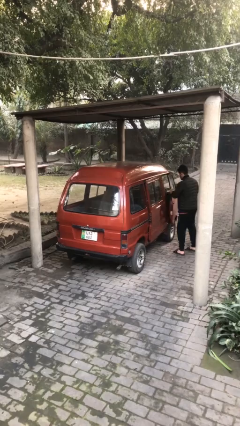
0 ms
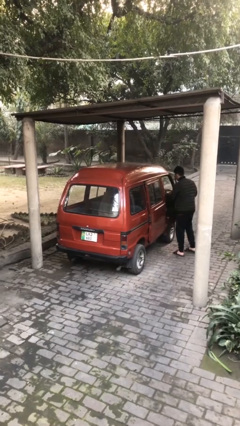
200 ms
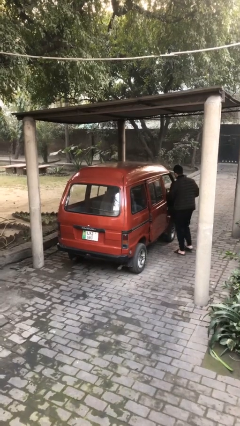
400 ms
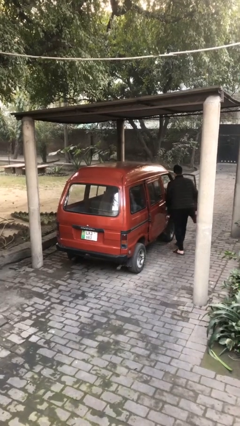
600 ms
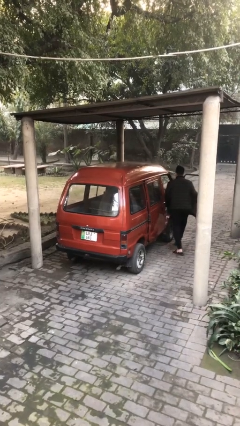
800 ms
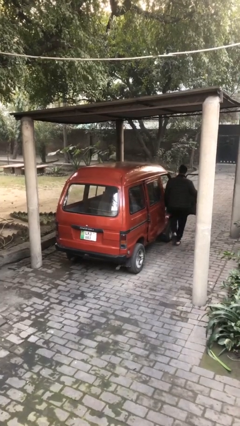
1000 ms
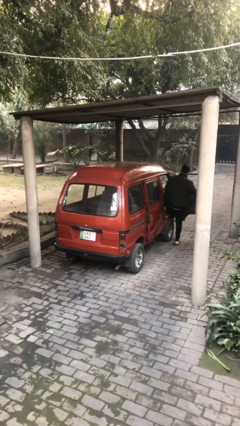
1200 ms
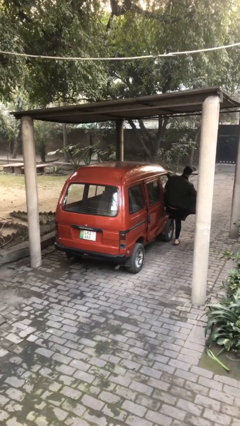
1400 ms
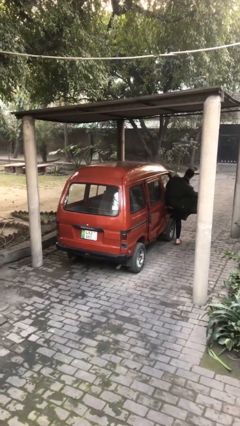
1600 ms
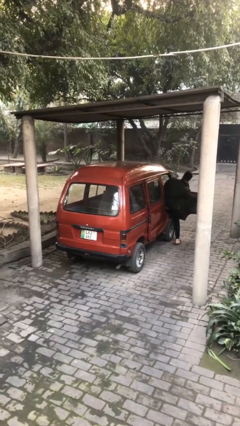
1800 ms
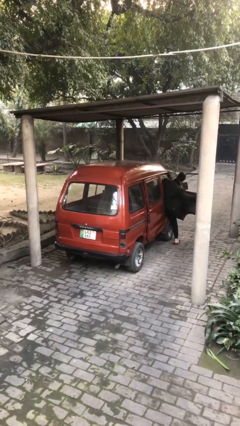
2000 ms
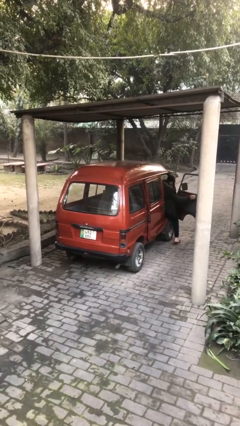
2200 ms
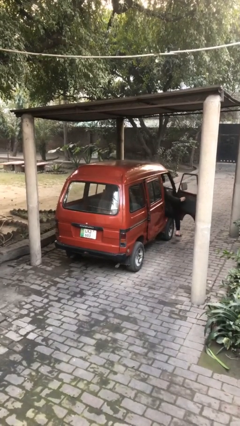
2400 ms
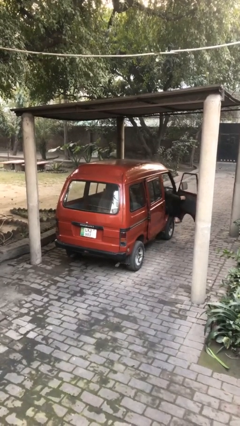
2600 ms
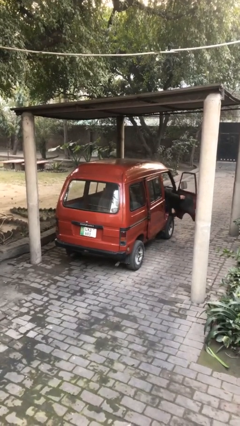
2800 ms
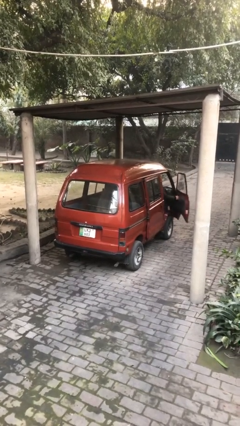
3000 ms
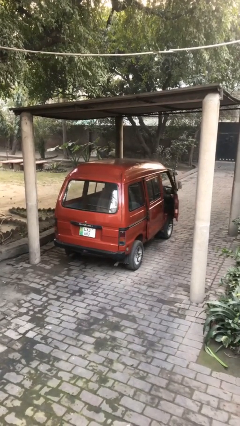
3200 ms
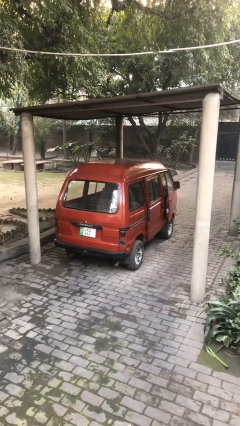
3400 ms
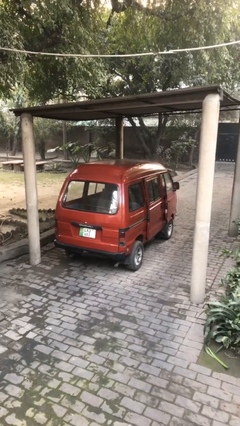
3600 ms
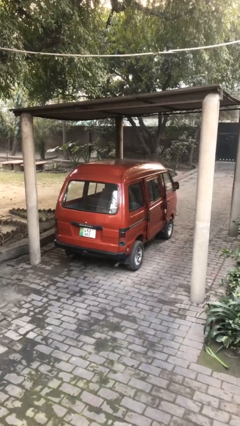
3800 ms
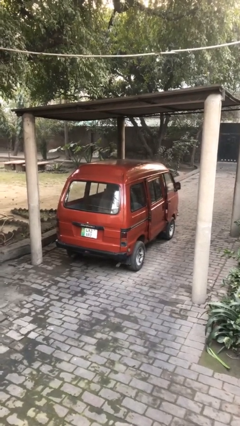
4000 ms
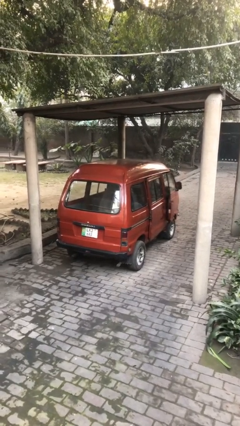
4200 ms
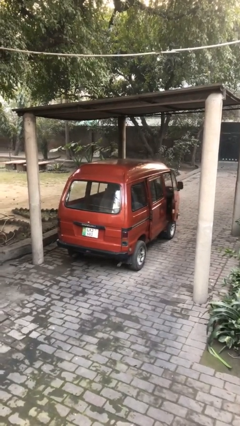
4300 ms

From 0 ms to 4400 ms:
car picks up person

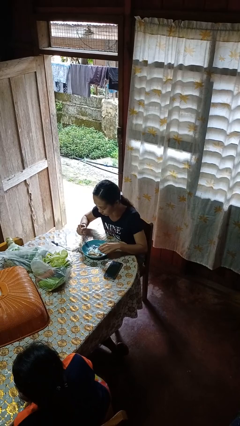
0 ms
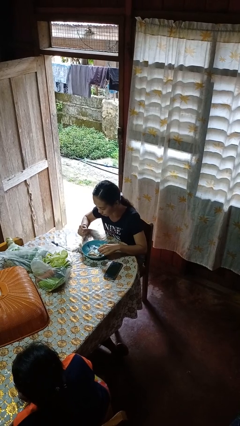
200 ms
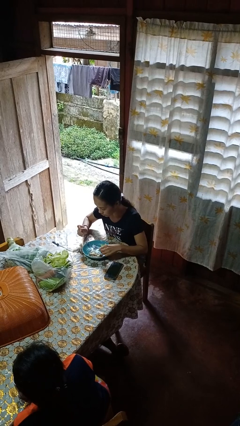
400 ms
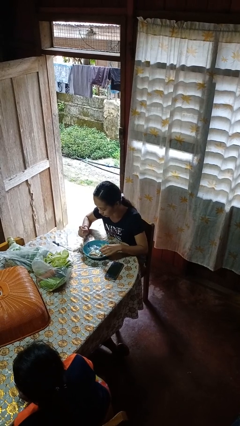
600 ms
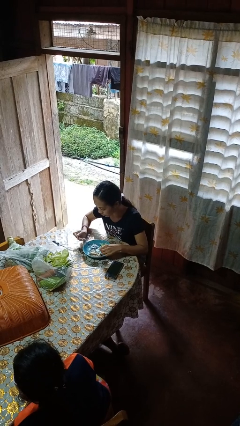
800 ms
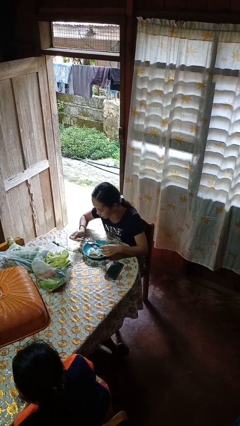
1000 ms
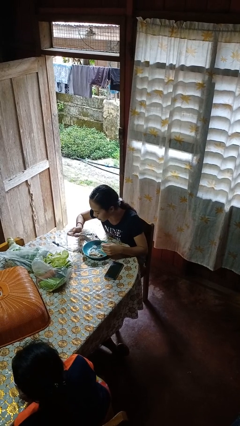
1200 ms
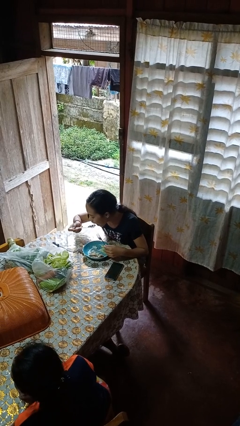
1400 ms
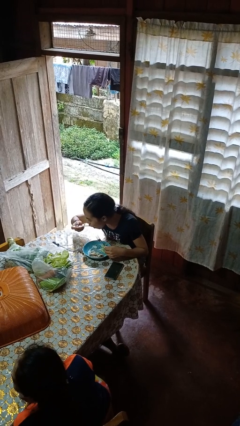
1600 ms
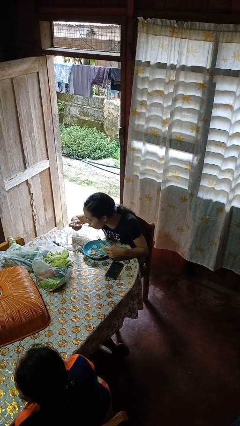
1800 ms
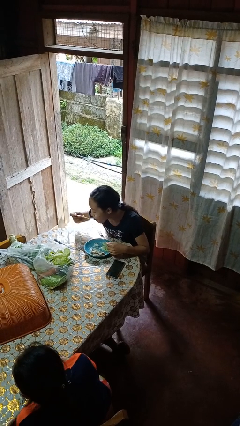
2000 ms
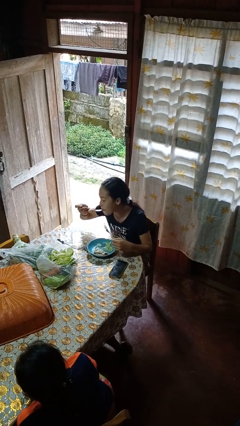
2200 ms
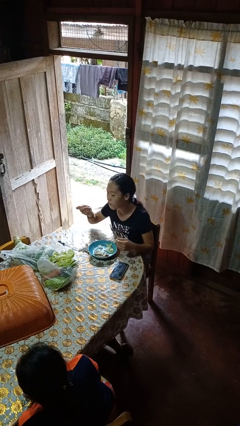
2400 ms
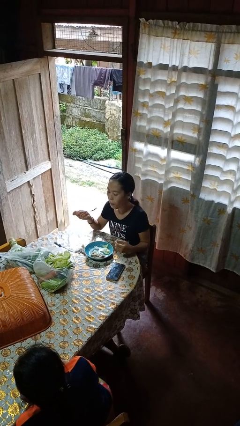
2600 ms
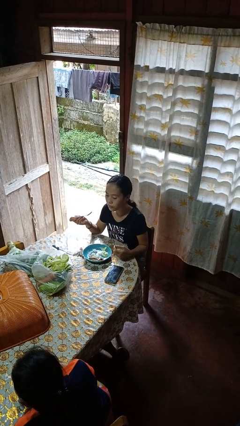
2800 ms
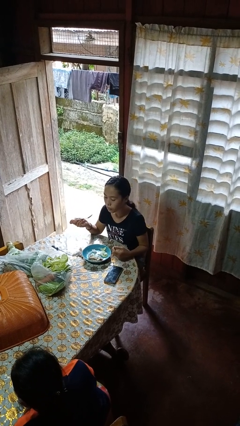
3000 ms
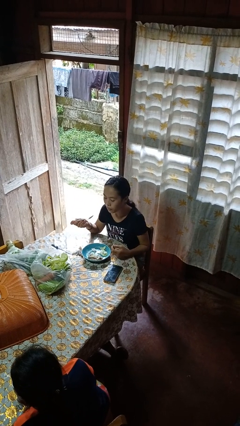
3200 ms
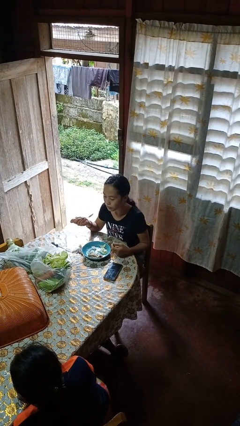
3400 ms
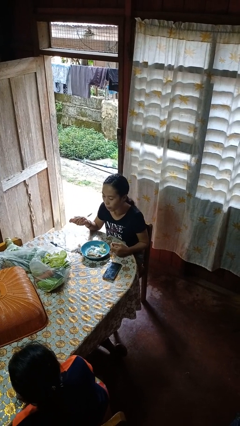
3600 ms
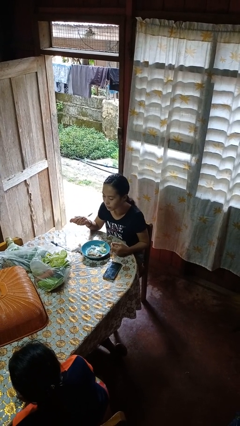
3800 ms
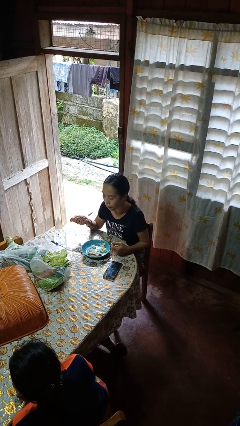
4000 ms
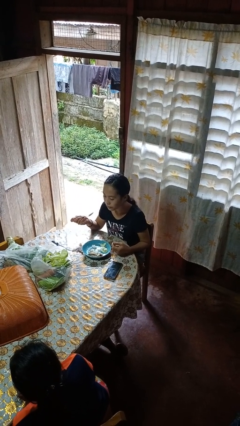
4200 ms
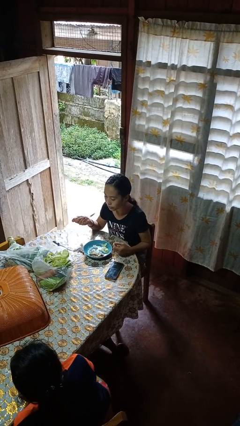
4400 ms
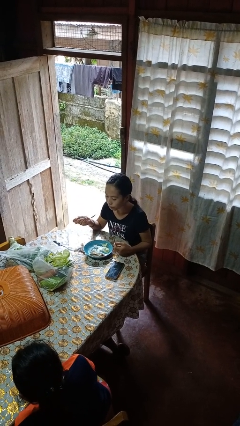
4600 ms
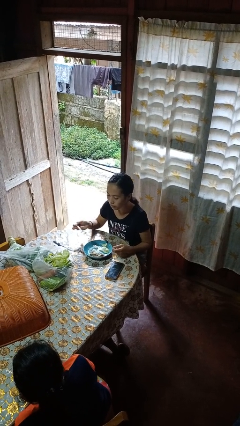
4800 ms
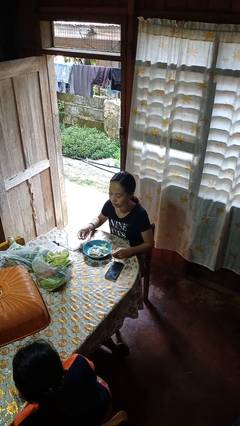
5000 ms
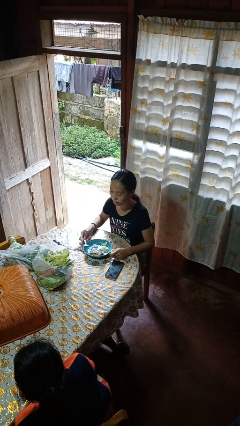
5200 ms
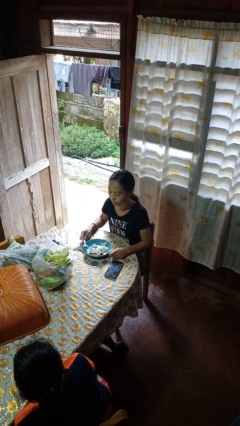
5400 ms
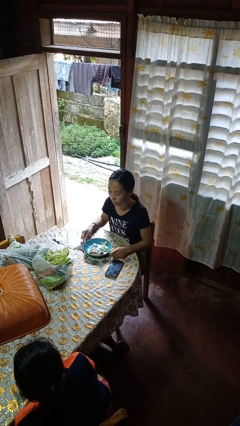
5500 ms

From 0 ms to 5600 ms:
person eats with utensil

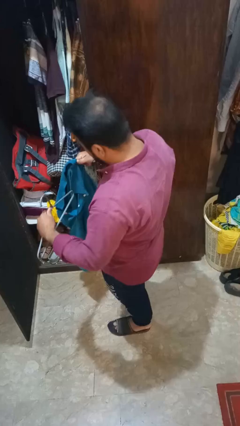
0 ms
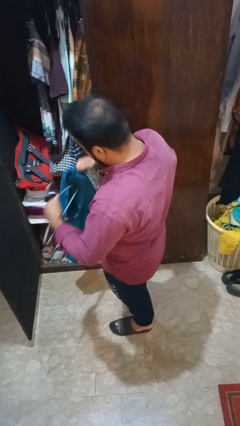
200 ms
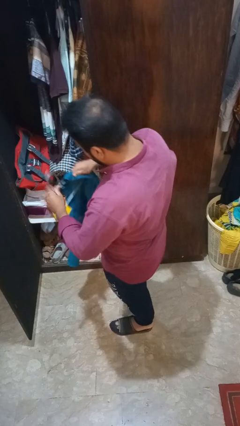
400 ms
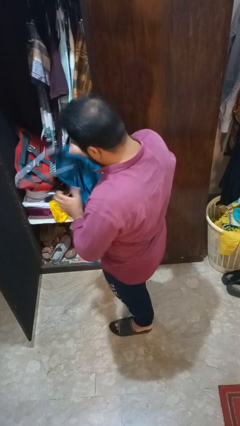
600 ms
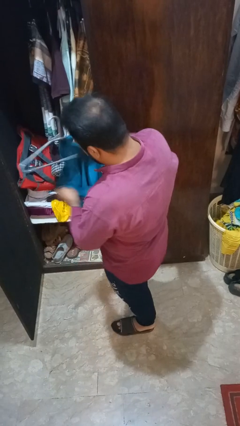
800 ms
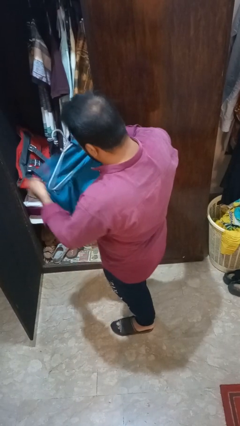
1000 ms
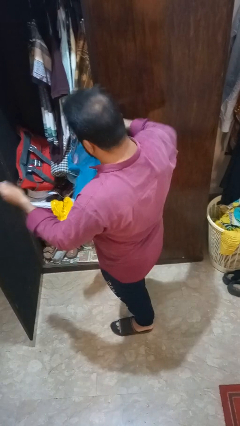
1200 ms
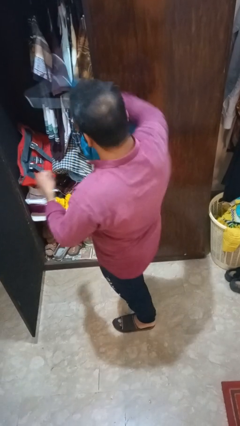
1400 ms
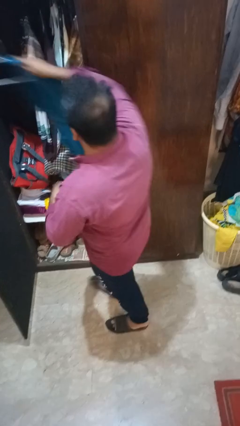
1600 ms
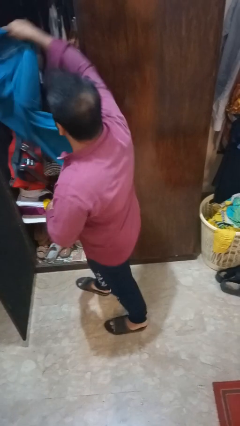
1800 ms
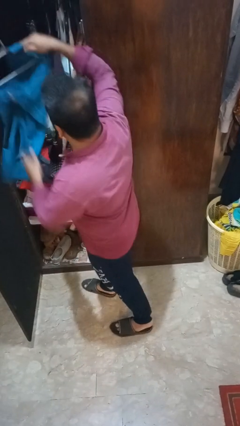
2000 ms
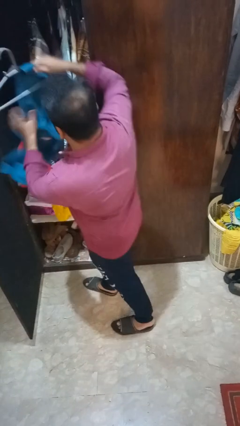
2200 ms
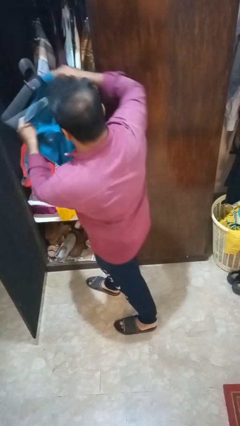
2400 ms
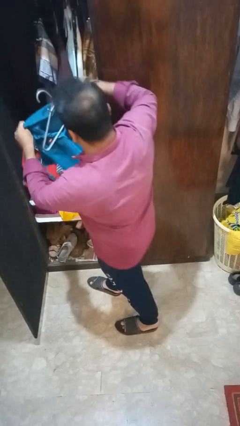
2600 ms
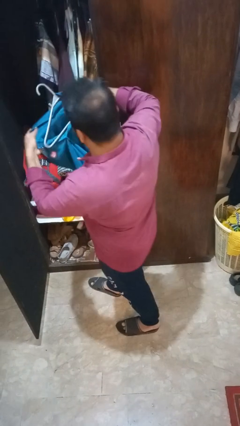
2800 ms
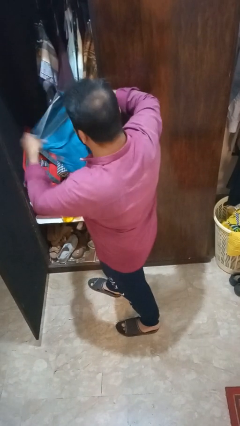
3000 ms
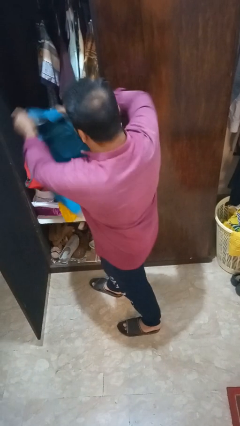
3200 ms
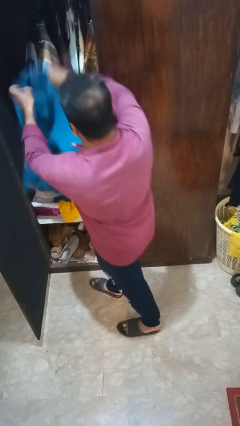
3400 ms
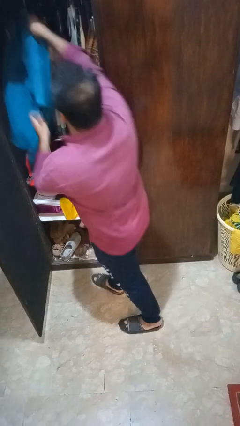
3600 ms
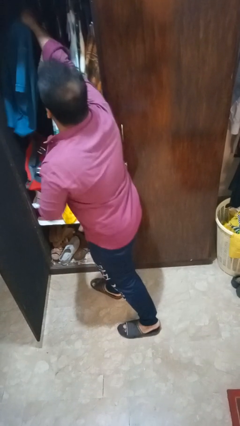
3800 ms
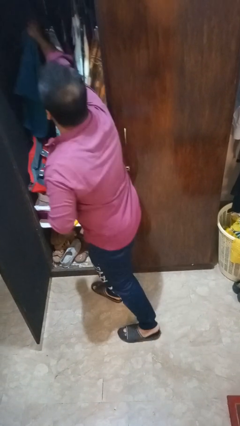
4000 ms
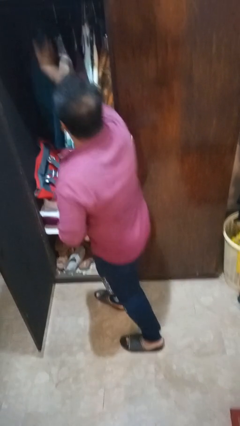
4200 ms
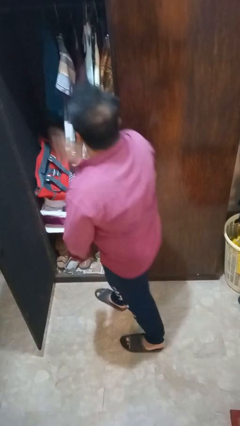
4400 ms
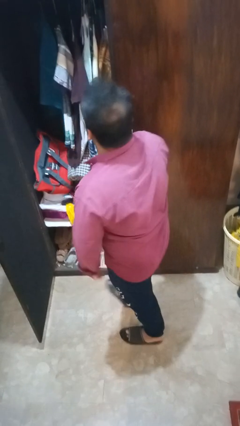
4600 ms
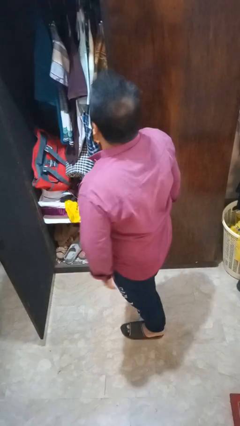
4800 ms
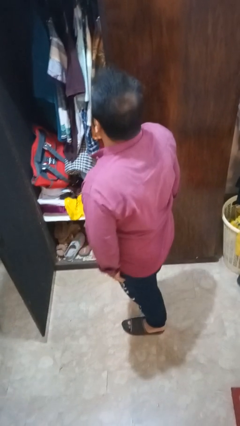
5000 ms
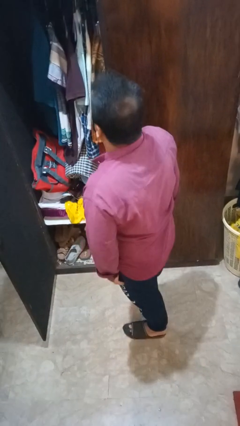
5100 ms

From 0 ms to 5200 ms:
person puts clothes into closet

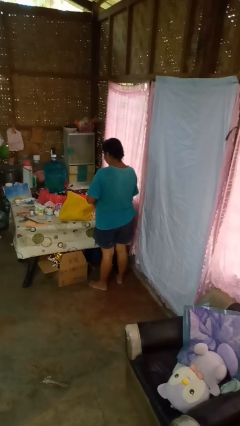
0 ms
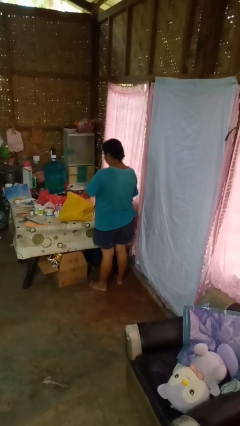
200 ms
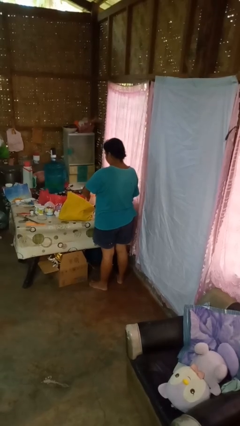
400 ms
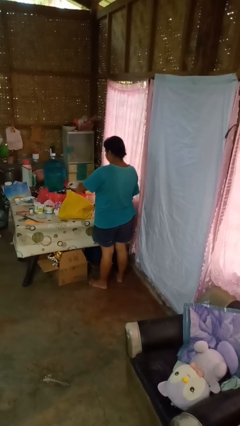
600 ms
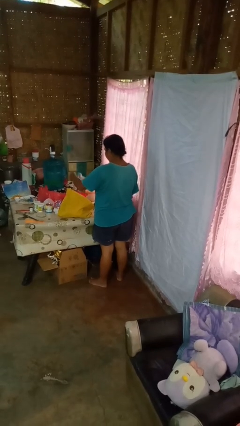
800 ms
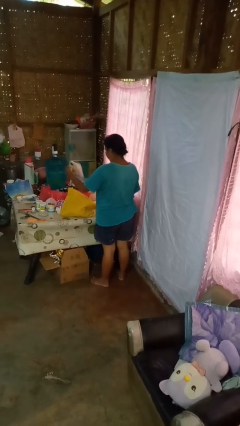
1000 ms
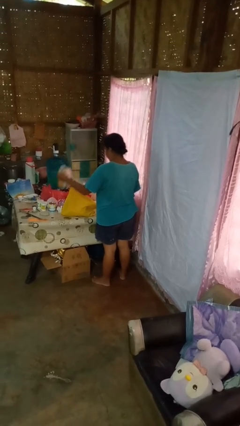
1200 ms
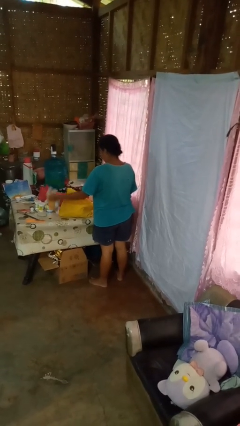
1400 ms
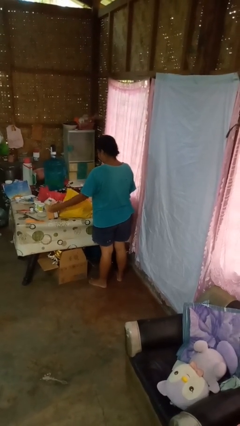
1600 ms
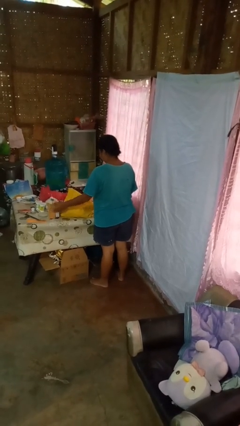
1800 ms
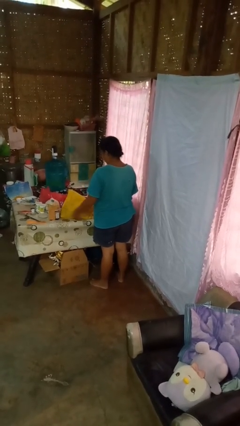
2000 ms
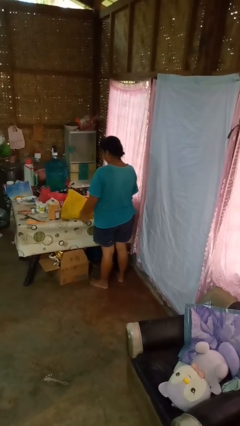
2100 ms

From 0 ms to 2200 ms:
person takes object from bag

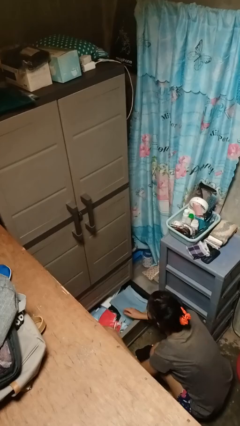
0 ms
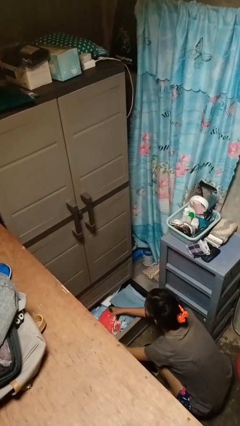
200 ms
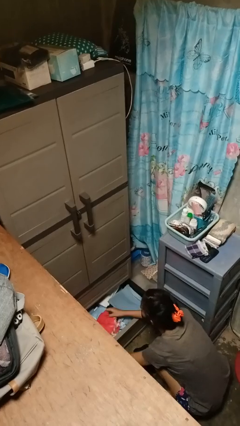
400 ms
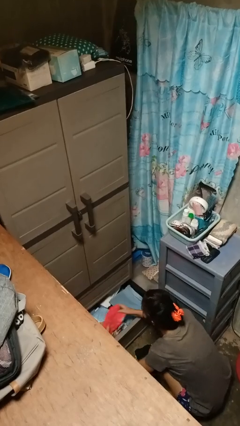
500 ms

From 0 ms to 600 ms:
person takes clothes from dresser
